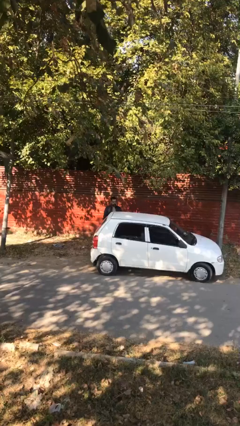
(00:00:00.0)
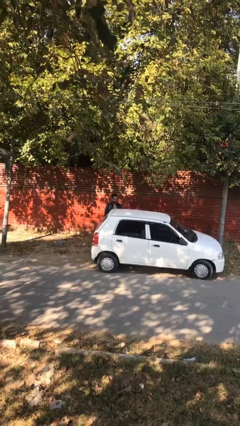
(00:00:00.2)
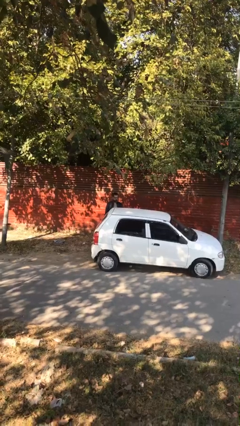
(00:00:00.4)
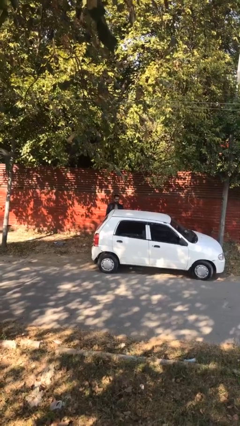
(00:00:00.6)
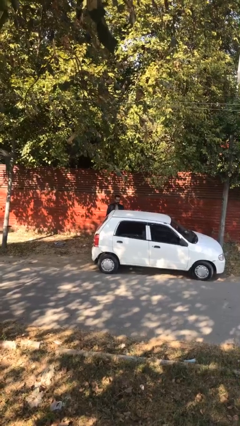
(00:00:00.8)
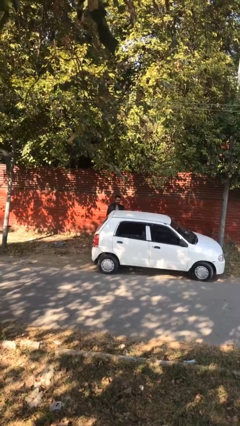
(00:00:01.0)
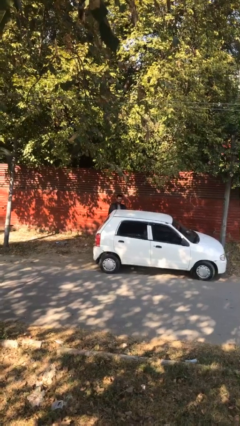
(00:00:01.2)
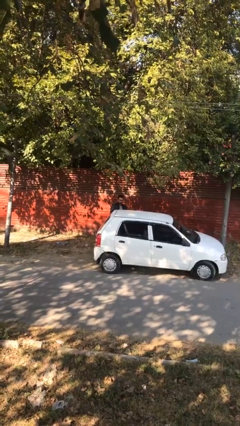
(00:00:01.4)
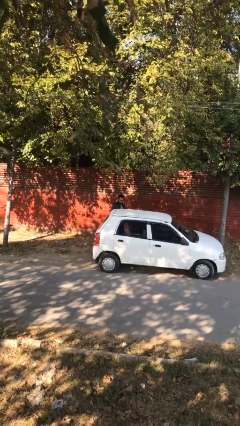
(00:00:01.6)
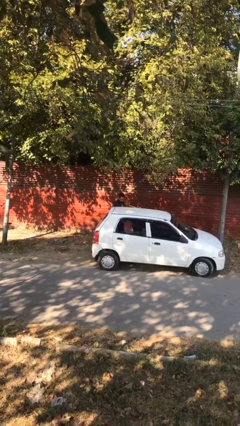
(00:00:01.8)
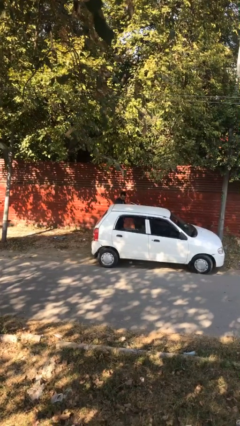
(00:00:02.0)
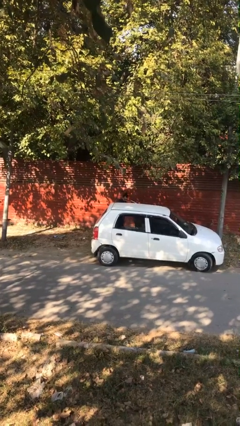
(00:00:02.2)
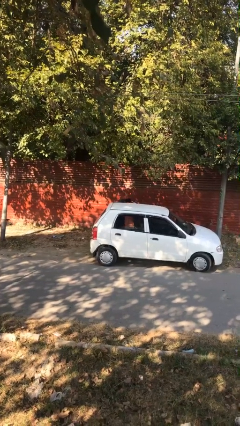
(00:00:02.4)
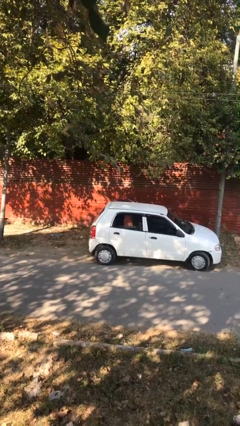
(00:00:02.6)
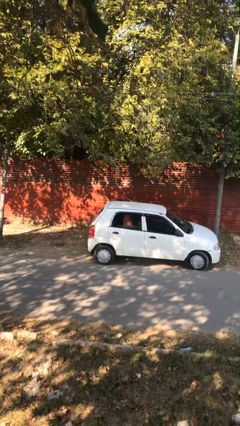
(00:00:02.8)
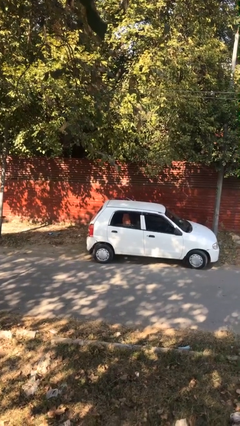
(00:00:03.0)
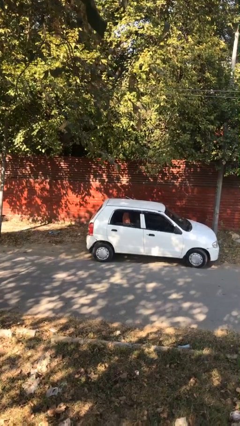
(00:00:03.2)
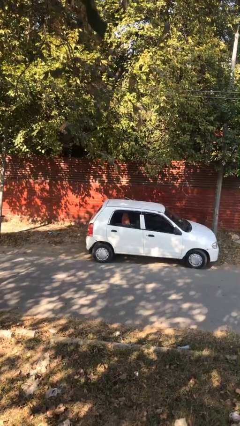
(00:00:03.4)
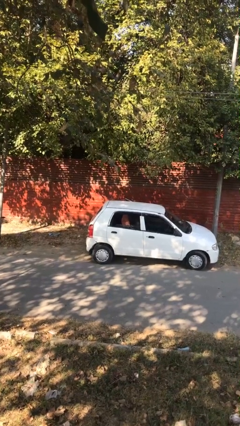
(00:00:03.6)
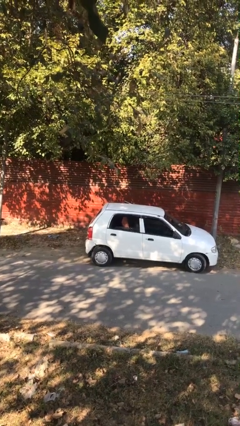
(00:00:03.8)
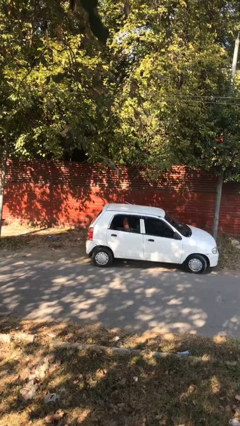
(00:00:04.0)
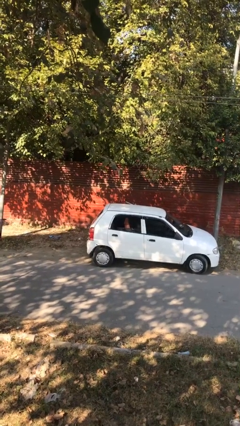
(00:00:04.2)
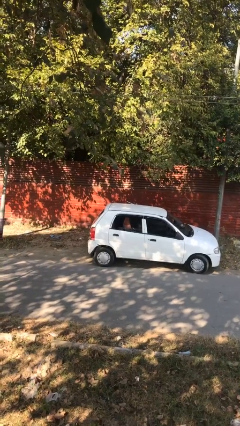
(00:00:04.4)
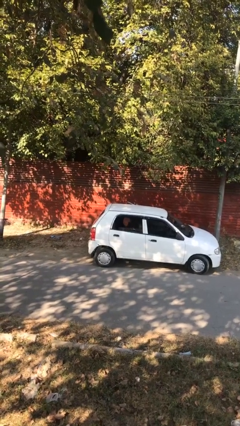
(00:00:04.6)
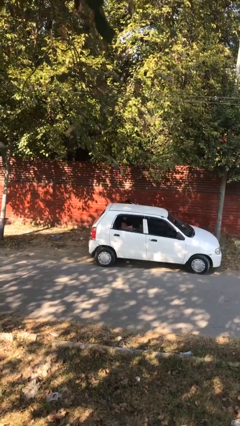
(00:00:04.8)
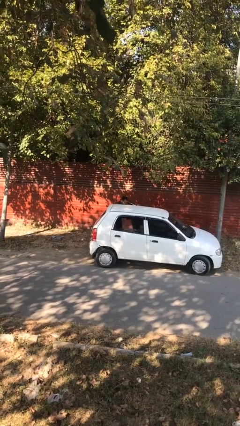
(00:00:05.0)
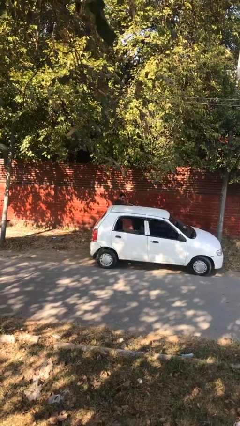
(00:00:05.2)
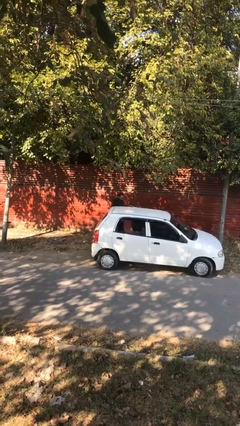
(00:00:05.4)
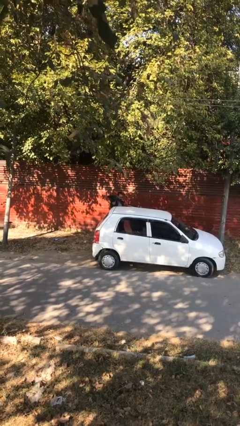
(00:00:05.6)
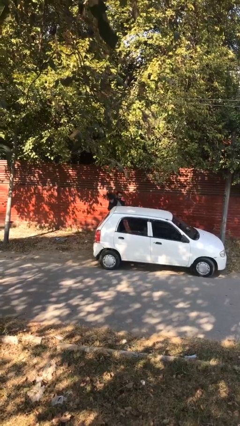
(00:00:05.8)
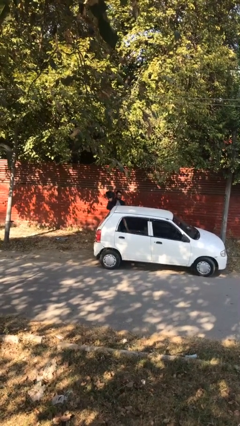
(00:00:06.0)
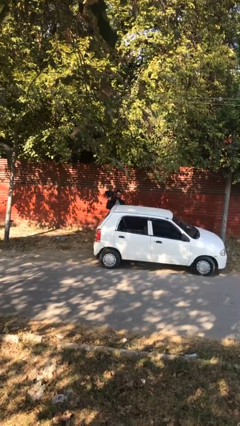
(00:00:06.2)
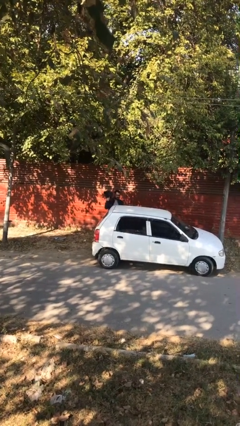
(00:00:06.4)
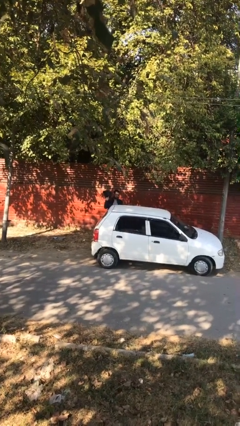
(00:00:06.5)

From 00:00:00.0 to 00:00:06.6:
person unloads car

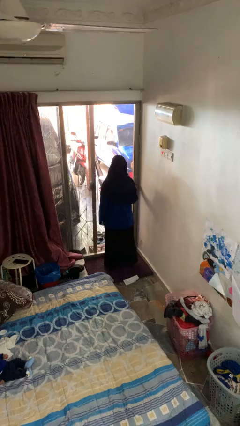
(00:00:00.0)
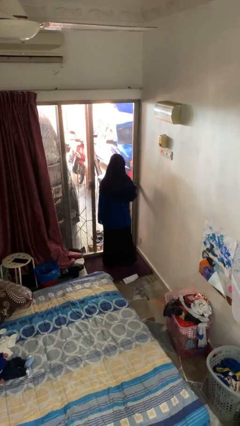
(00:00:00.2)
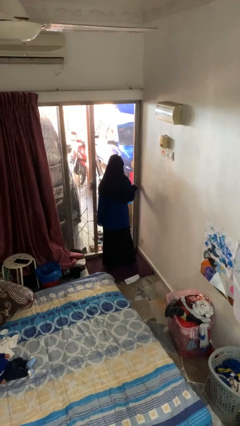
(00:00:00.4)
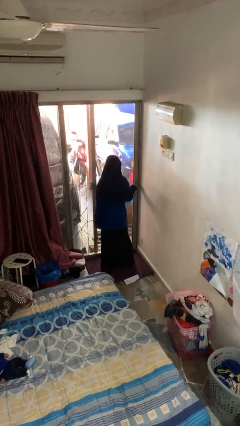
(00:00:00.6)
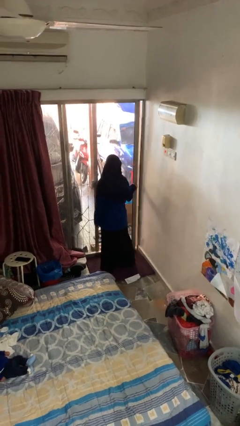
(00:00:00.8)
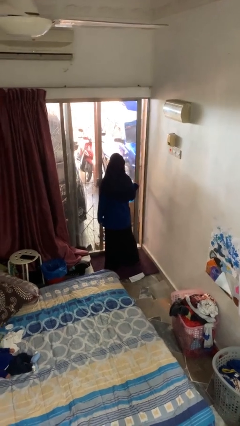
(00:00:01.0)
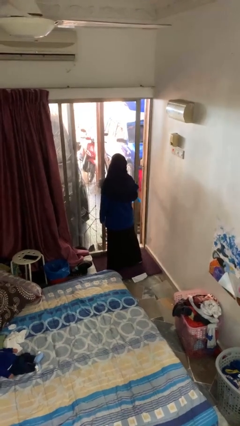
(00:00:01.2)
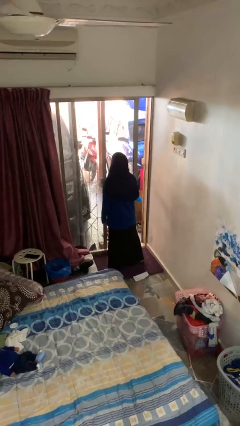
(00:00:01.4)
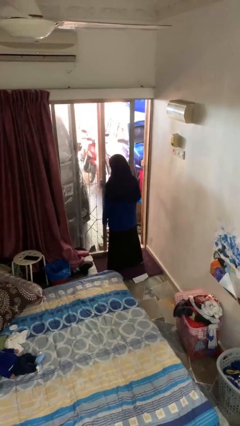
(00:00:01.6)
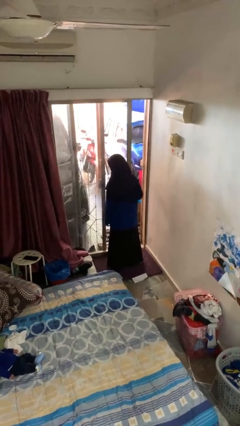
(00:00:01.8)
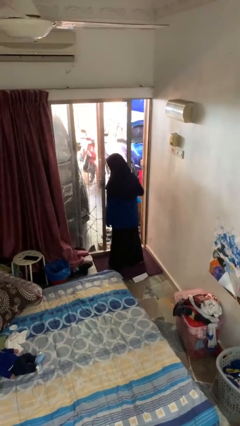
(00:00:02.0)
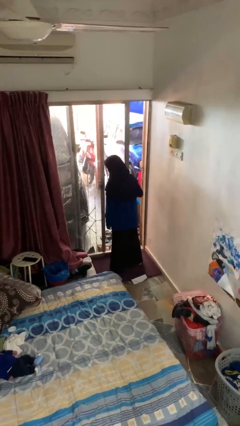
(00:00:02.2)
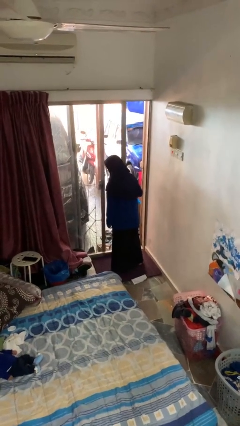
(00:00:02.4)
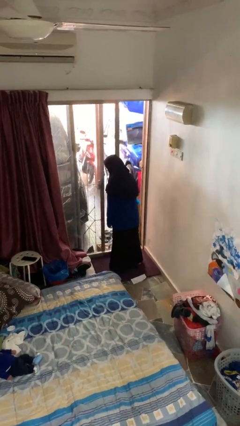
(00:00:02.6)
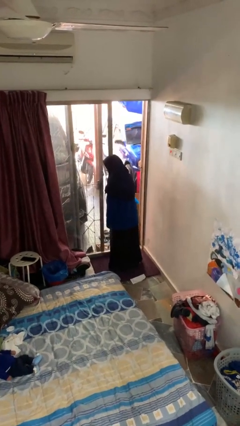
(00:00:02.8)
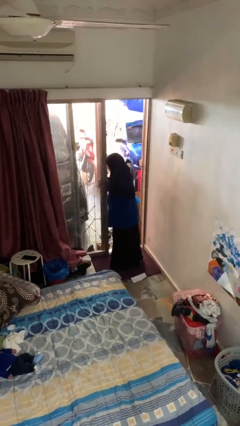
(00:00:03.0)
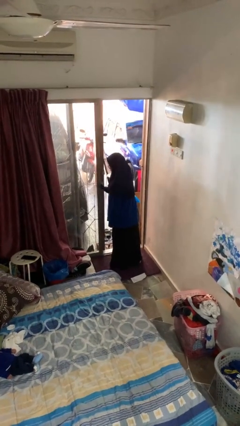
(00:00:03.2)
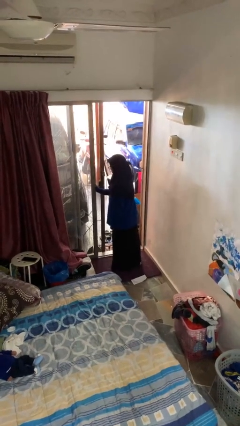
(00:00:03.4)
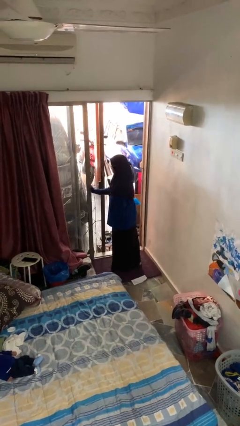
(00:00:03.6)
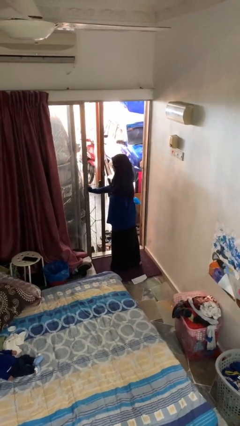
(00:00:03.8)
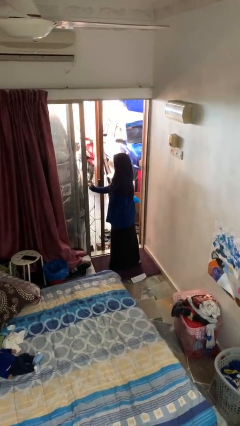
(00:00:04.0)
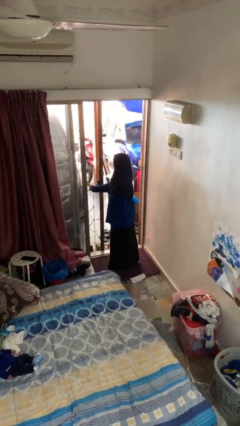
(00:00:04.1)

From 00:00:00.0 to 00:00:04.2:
person opens sliding door

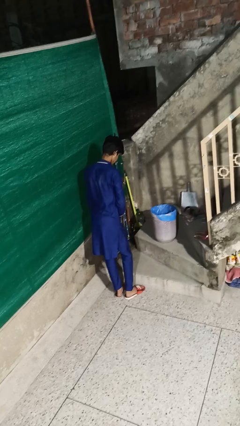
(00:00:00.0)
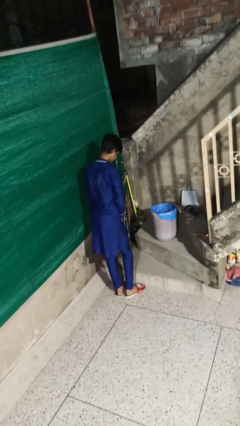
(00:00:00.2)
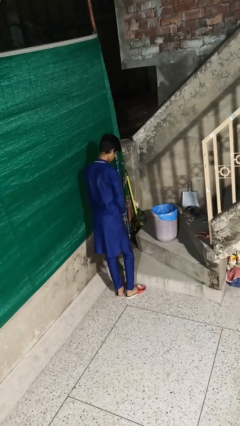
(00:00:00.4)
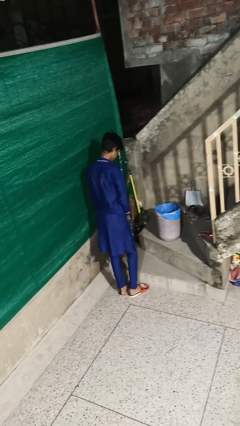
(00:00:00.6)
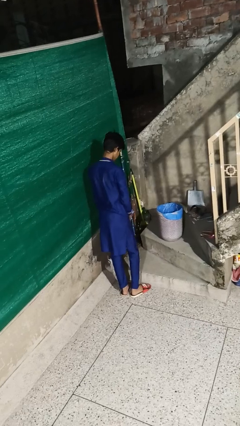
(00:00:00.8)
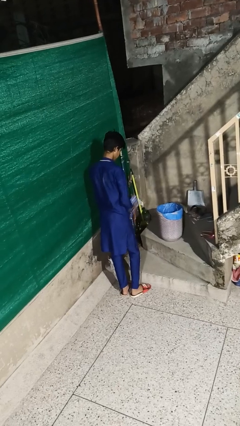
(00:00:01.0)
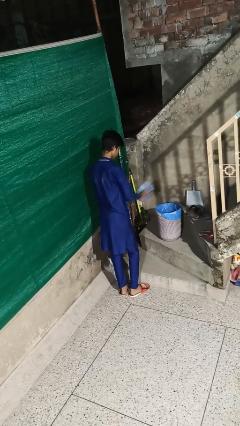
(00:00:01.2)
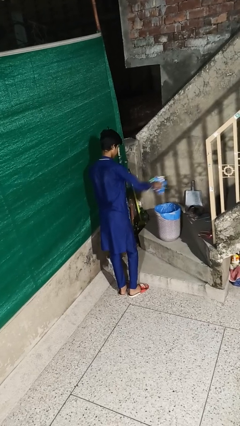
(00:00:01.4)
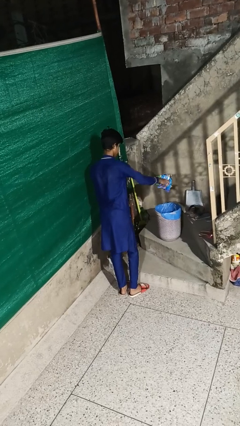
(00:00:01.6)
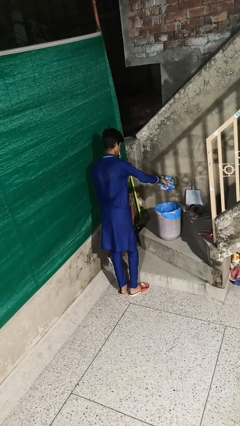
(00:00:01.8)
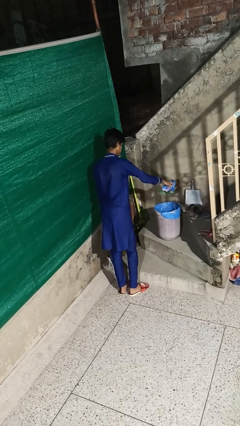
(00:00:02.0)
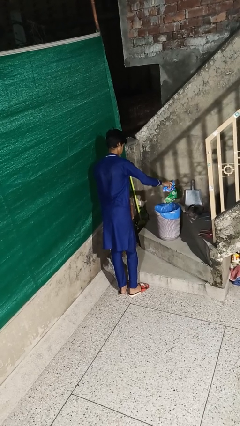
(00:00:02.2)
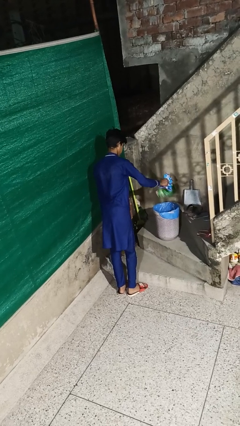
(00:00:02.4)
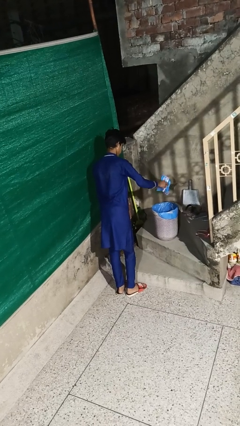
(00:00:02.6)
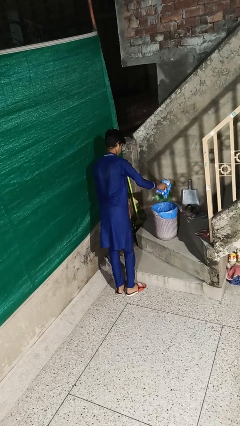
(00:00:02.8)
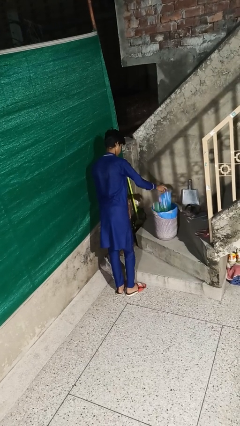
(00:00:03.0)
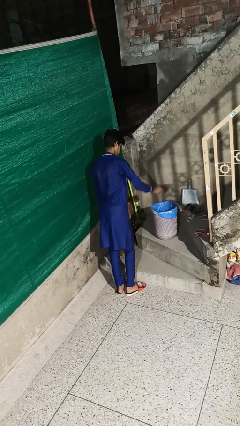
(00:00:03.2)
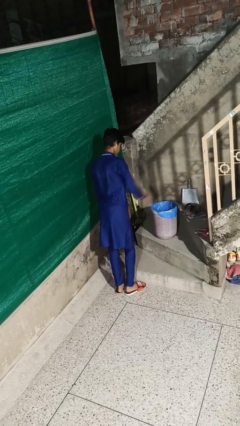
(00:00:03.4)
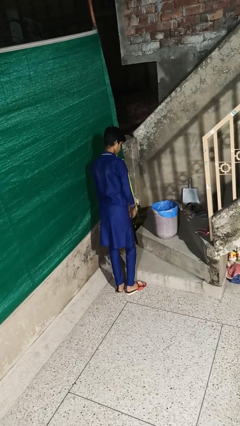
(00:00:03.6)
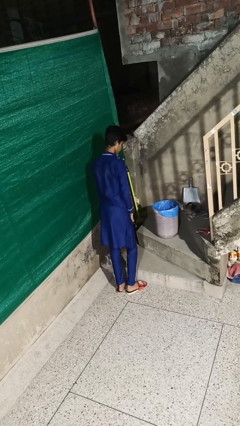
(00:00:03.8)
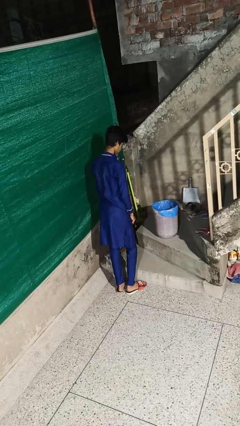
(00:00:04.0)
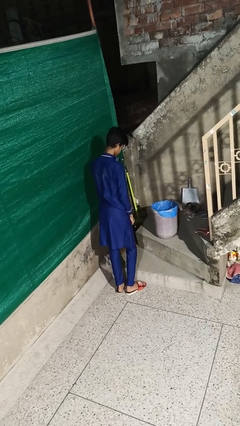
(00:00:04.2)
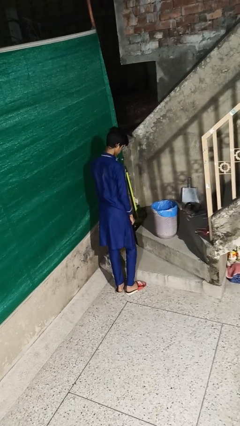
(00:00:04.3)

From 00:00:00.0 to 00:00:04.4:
person discards trash

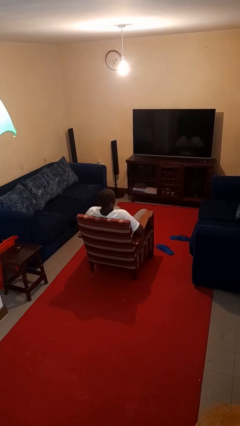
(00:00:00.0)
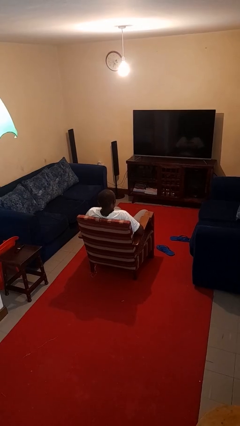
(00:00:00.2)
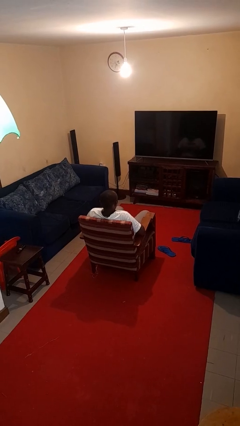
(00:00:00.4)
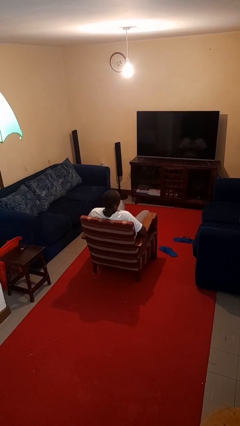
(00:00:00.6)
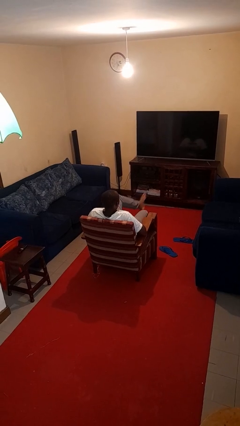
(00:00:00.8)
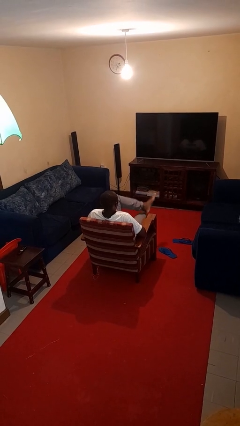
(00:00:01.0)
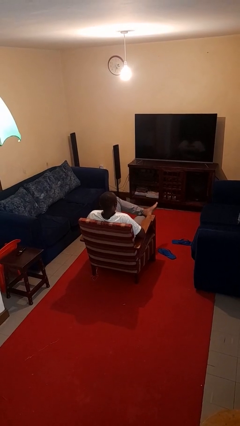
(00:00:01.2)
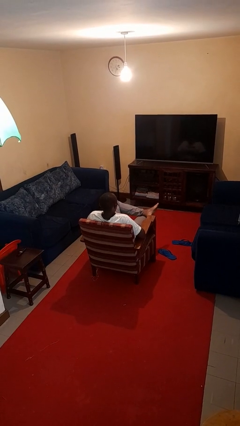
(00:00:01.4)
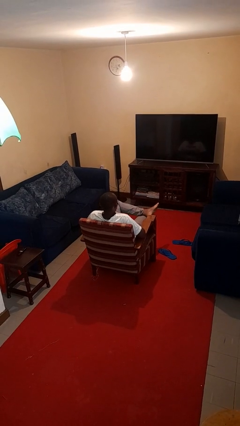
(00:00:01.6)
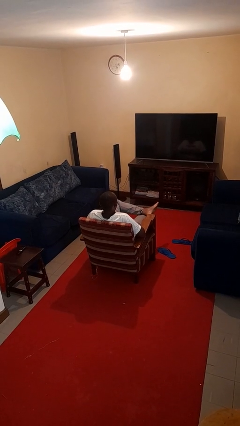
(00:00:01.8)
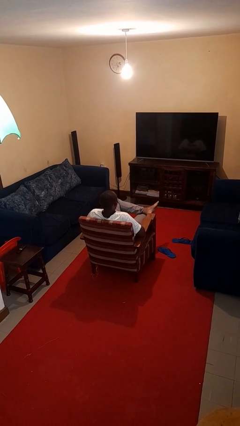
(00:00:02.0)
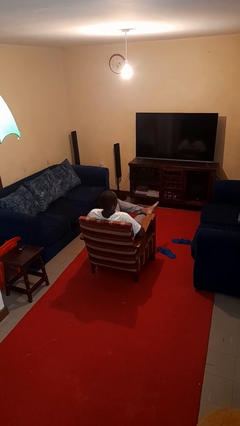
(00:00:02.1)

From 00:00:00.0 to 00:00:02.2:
person crosses legs
